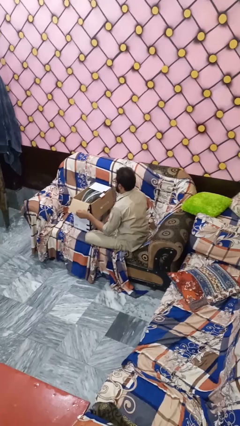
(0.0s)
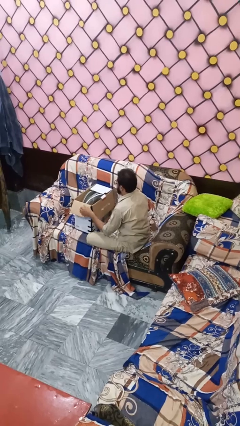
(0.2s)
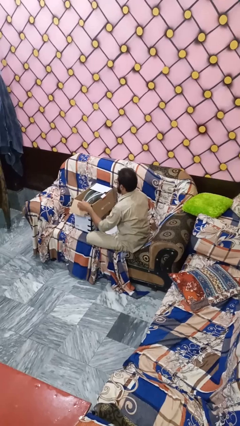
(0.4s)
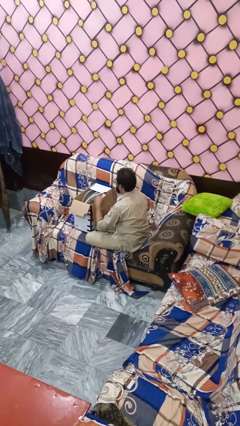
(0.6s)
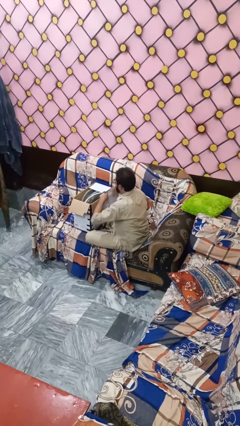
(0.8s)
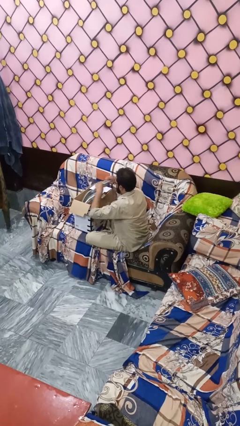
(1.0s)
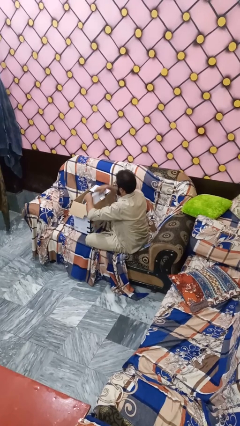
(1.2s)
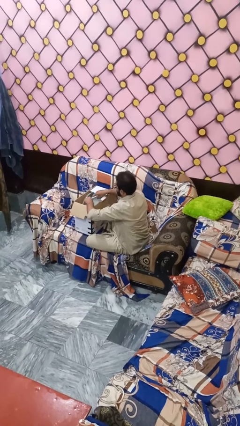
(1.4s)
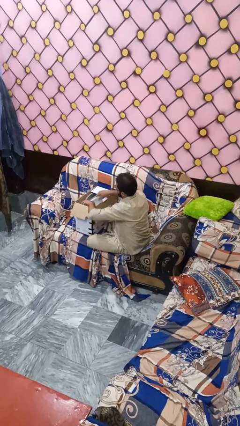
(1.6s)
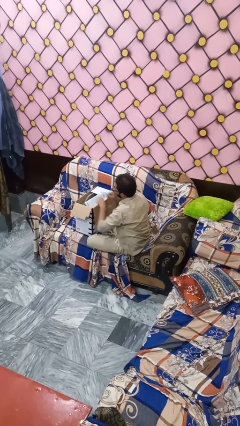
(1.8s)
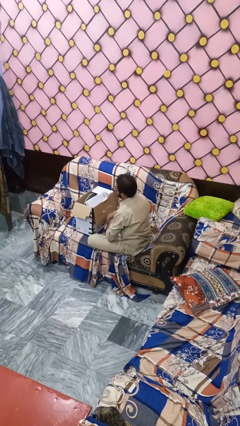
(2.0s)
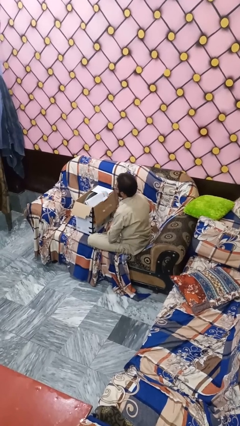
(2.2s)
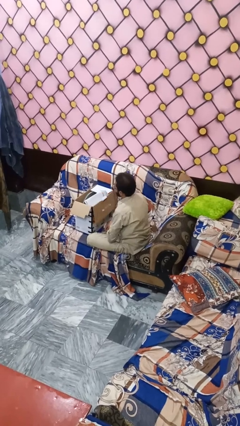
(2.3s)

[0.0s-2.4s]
person wraps box

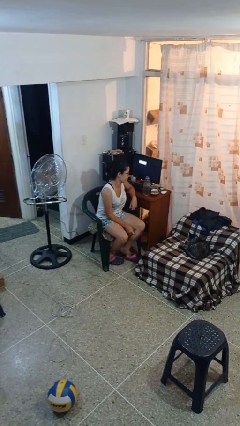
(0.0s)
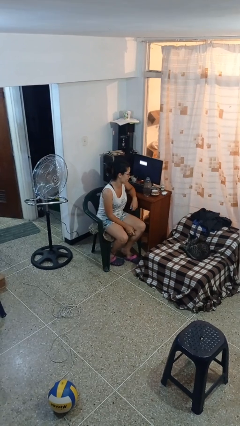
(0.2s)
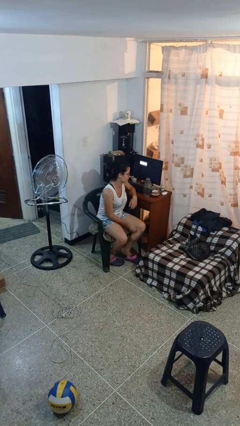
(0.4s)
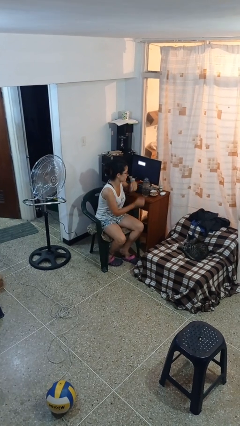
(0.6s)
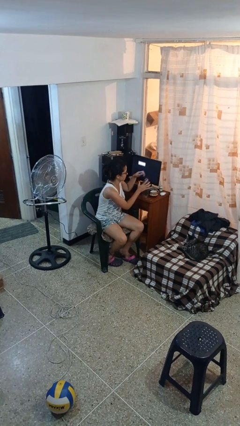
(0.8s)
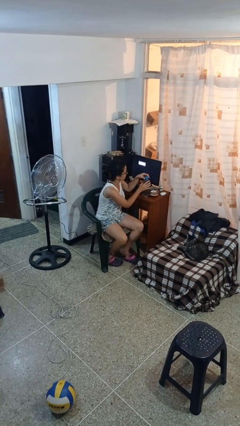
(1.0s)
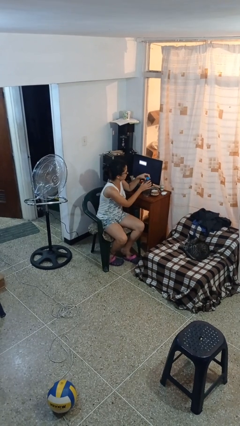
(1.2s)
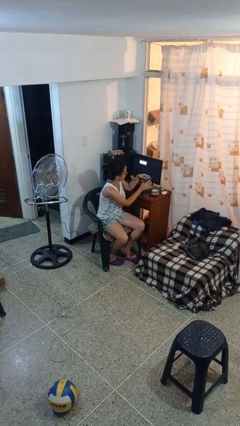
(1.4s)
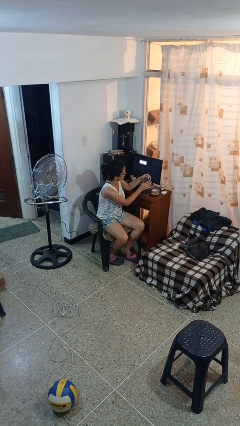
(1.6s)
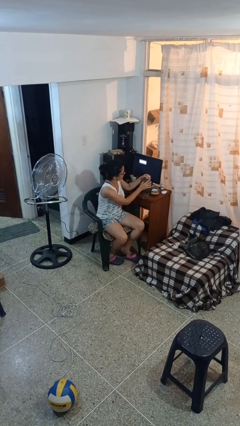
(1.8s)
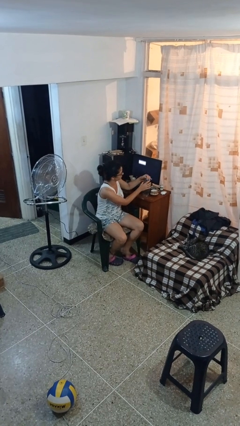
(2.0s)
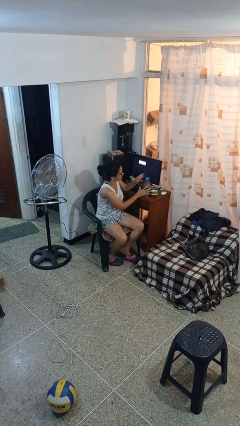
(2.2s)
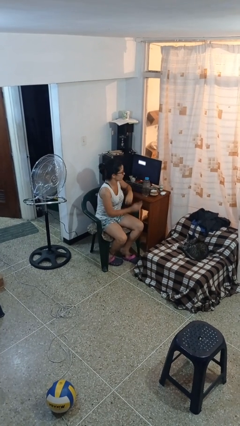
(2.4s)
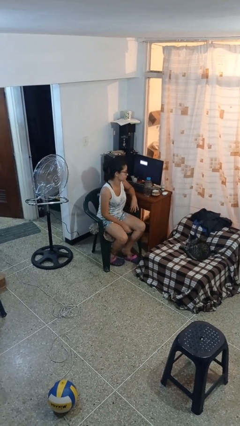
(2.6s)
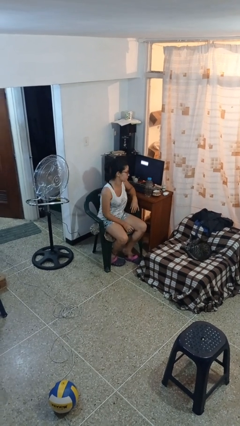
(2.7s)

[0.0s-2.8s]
person screws lid to bottle

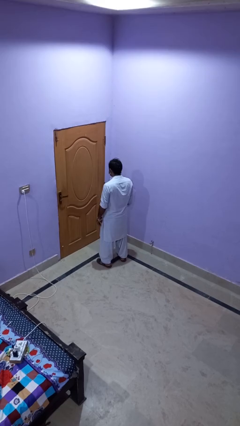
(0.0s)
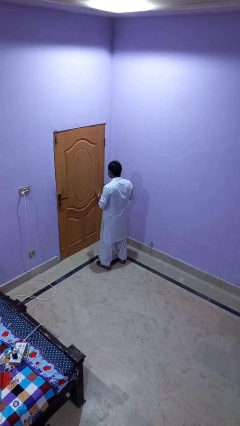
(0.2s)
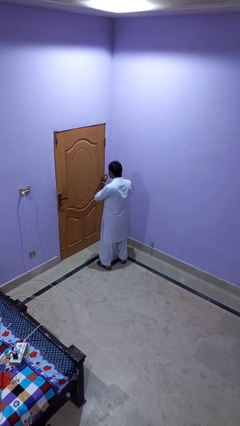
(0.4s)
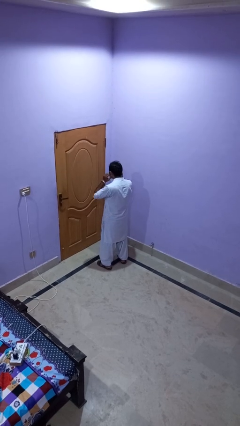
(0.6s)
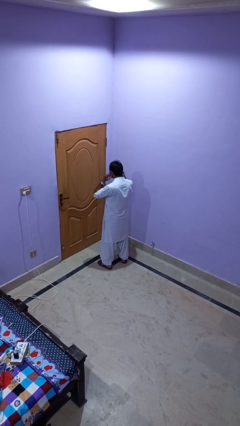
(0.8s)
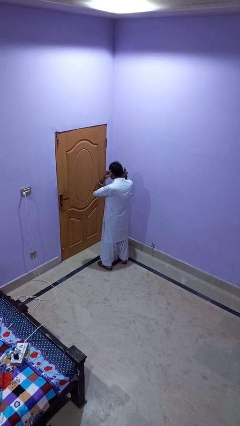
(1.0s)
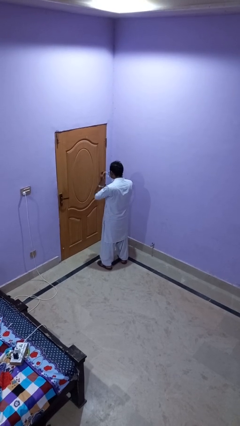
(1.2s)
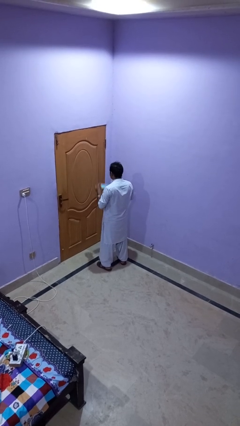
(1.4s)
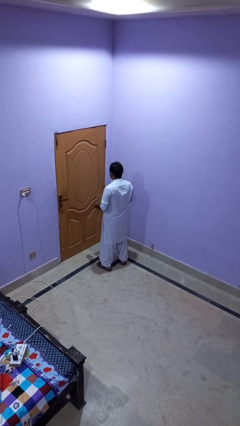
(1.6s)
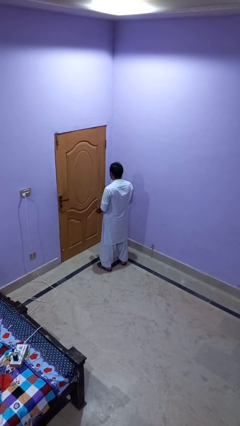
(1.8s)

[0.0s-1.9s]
person takes off facemask

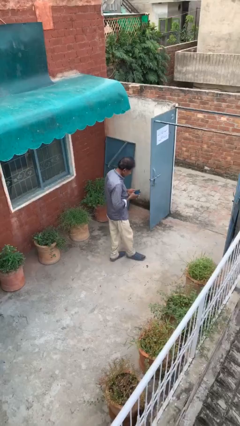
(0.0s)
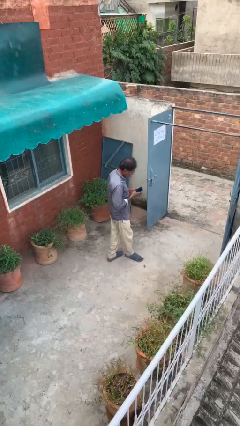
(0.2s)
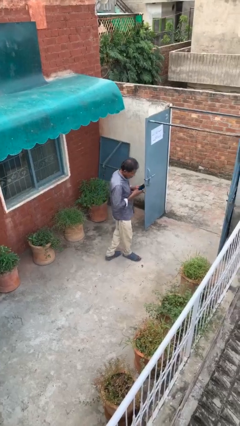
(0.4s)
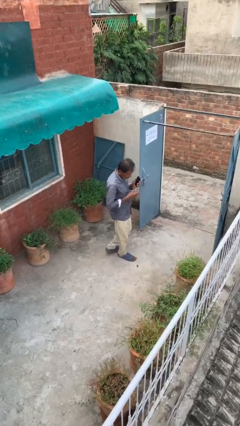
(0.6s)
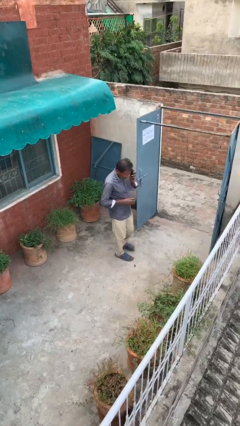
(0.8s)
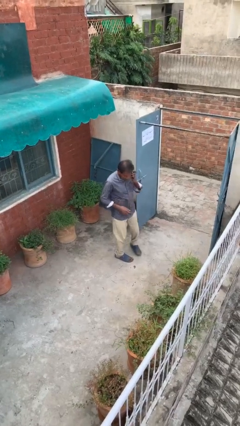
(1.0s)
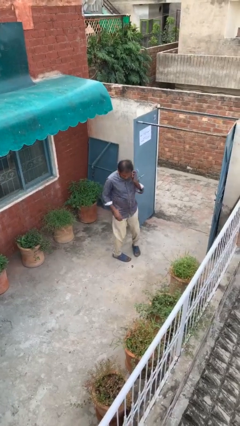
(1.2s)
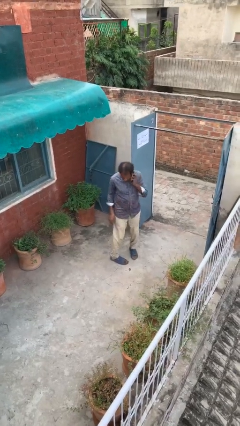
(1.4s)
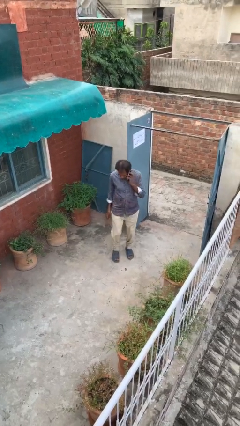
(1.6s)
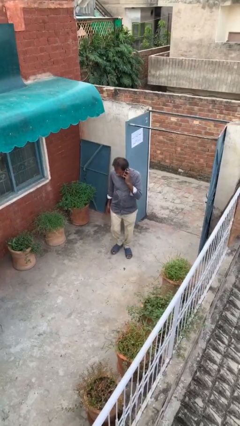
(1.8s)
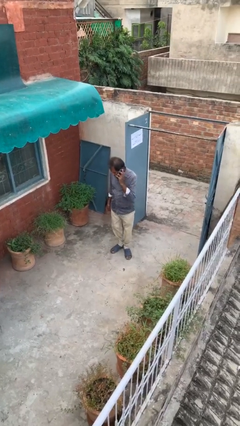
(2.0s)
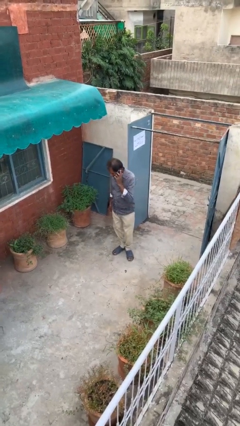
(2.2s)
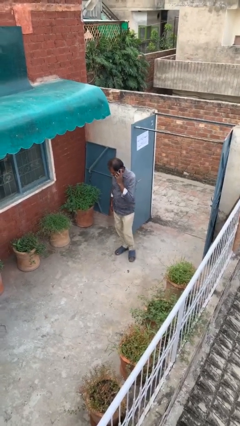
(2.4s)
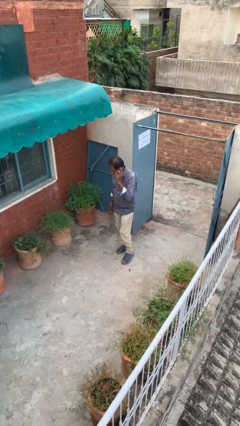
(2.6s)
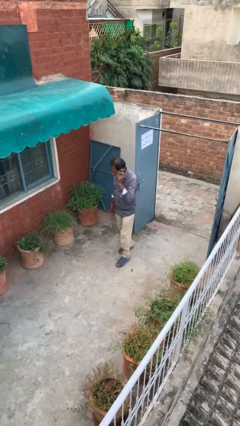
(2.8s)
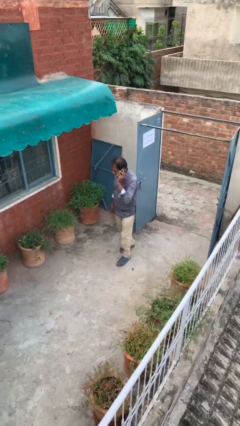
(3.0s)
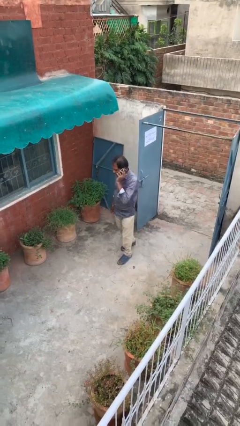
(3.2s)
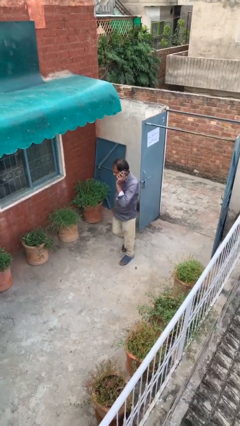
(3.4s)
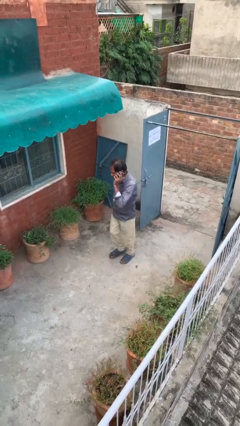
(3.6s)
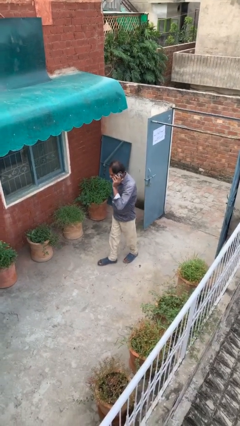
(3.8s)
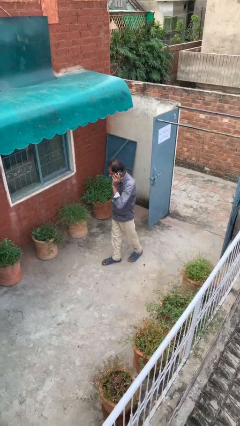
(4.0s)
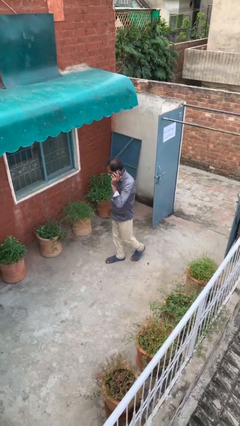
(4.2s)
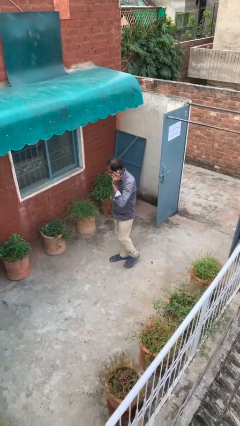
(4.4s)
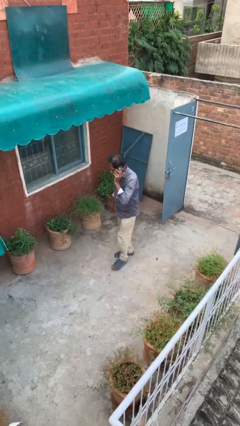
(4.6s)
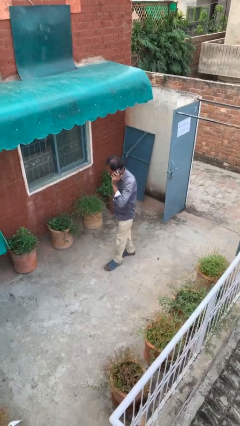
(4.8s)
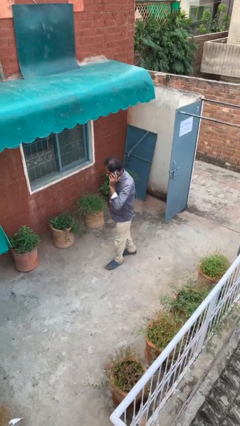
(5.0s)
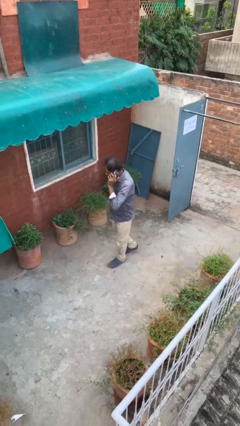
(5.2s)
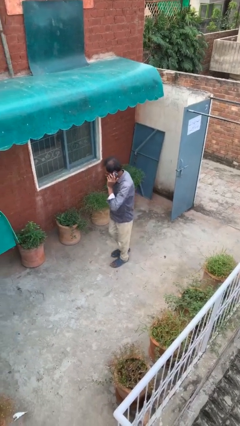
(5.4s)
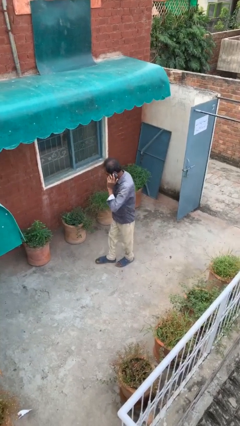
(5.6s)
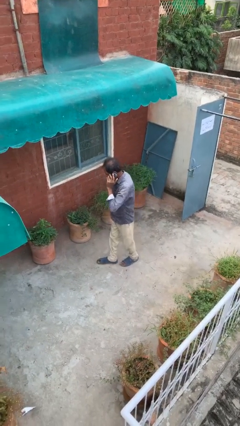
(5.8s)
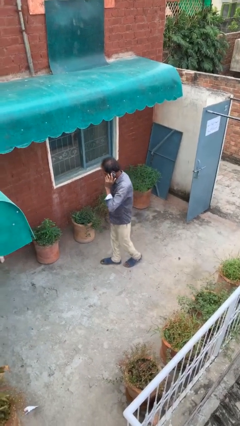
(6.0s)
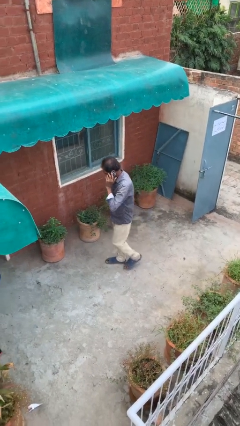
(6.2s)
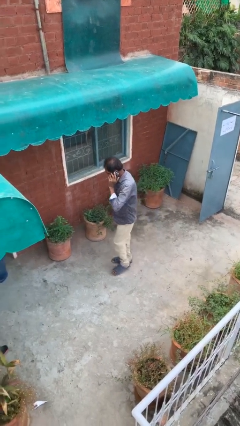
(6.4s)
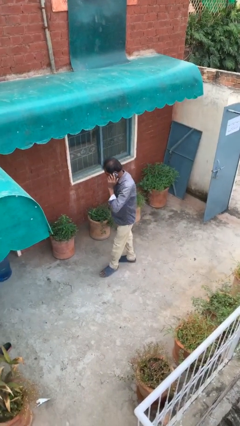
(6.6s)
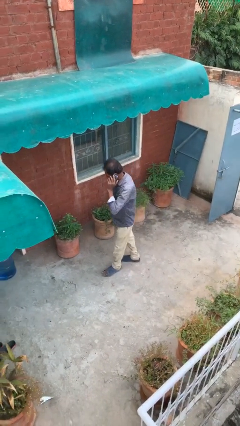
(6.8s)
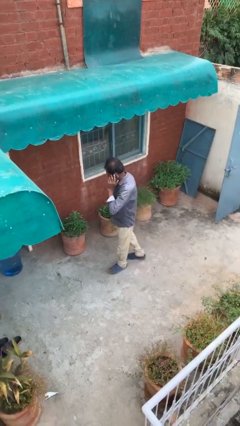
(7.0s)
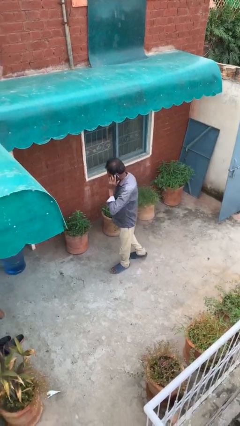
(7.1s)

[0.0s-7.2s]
person talks on phone

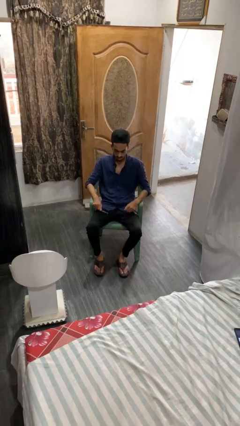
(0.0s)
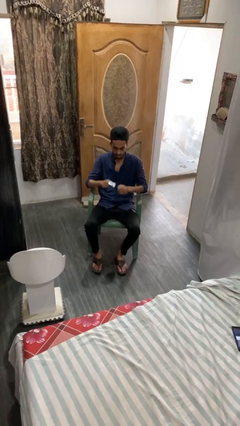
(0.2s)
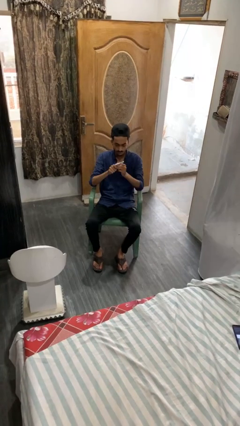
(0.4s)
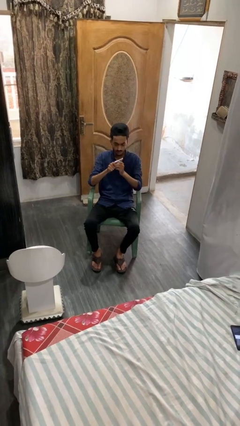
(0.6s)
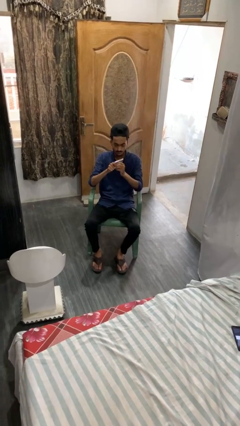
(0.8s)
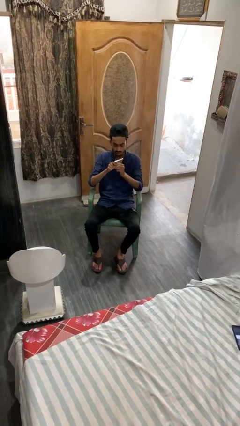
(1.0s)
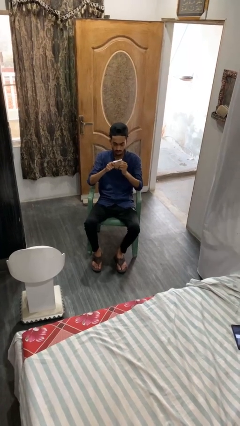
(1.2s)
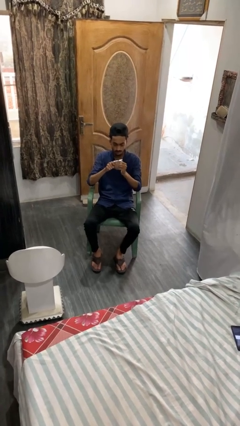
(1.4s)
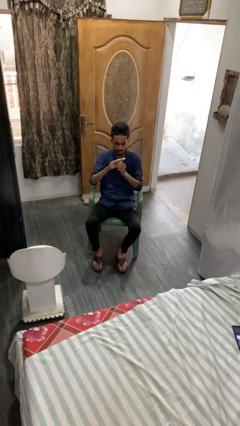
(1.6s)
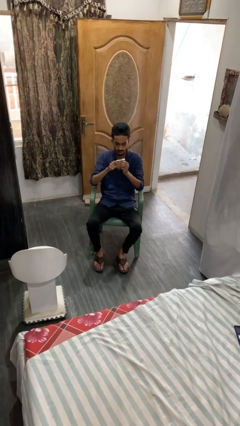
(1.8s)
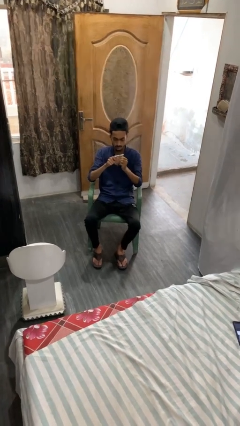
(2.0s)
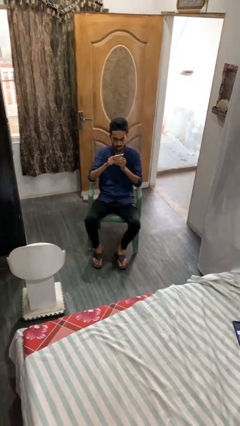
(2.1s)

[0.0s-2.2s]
person files fingernails

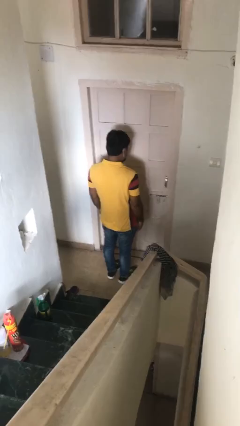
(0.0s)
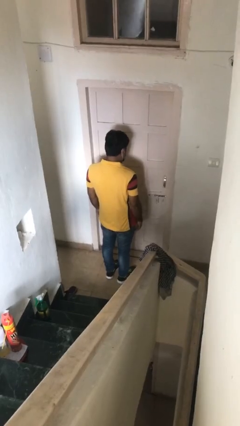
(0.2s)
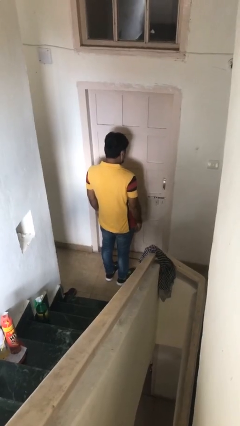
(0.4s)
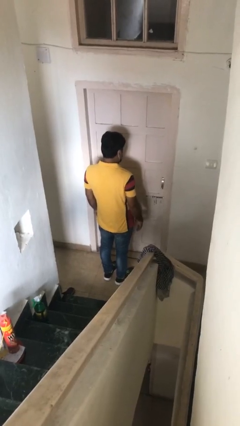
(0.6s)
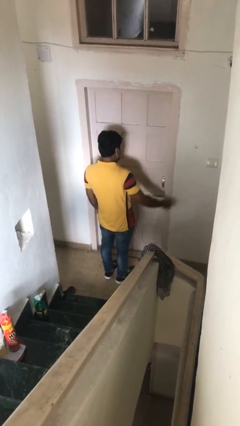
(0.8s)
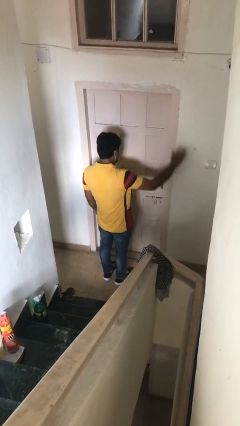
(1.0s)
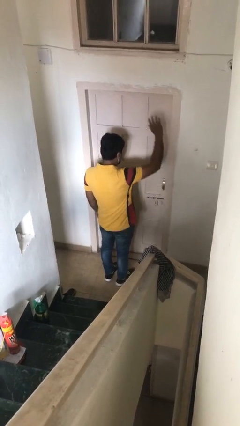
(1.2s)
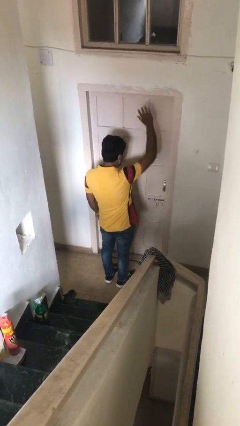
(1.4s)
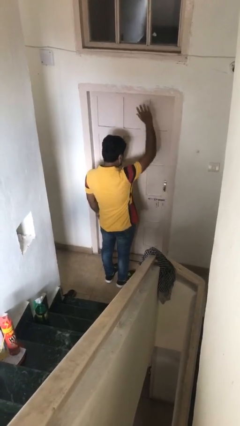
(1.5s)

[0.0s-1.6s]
person gestures raise hand
